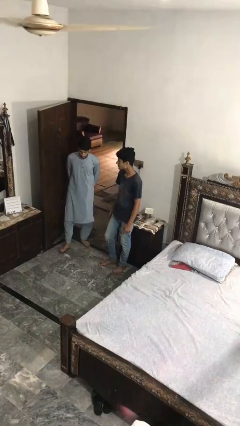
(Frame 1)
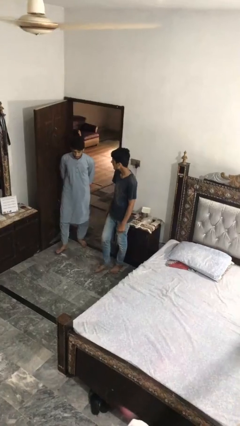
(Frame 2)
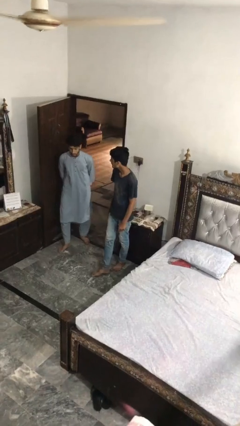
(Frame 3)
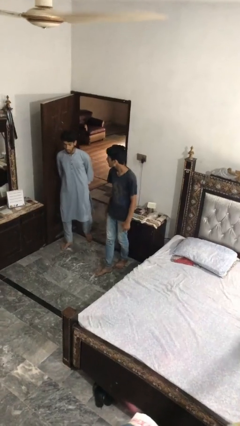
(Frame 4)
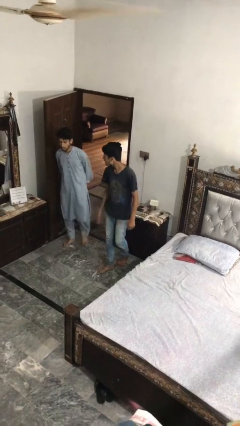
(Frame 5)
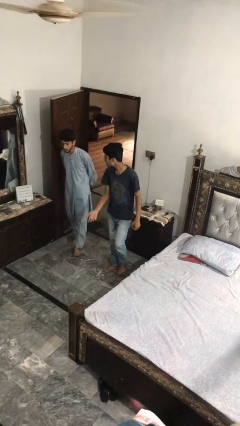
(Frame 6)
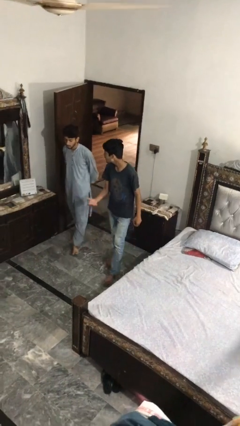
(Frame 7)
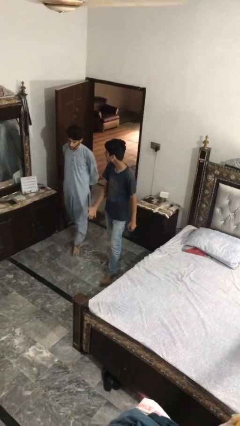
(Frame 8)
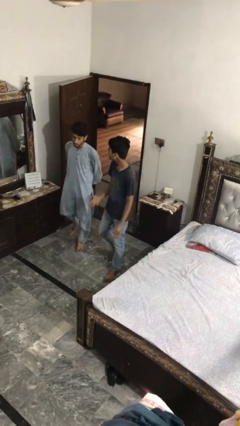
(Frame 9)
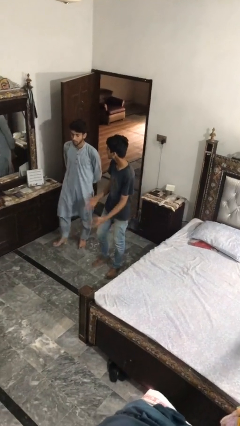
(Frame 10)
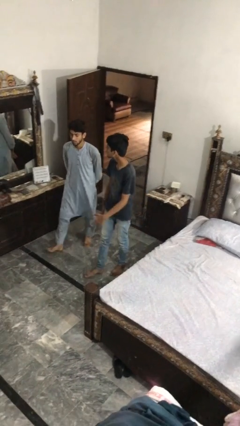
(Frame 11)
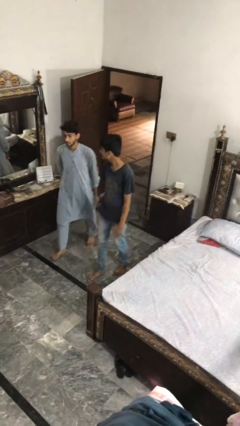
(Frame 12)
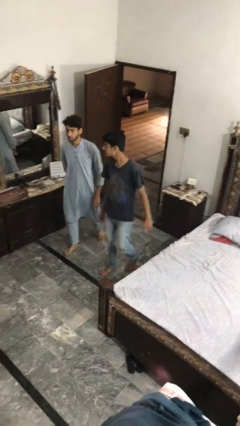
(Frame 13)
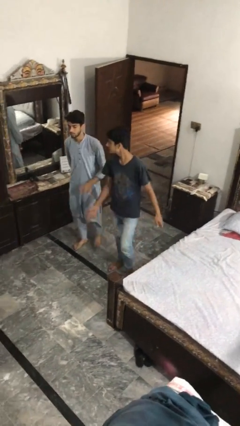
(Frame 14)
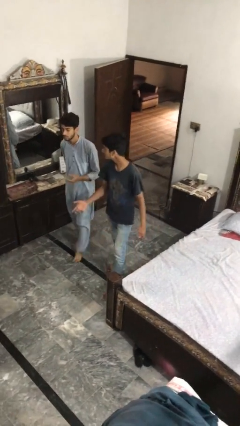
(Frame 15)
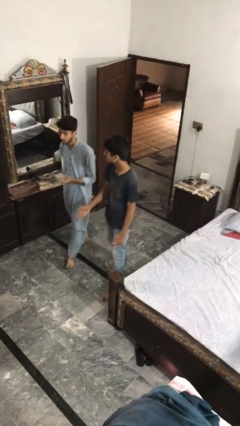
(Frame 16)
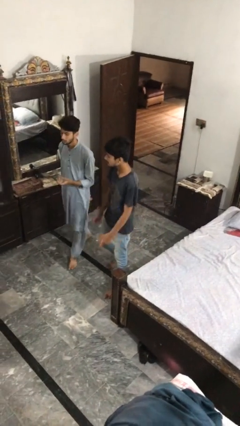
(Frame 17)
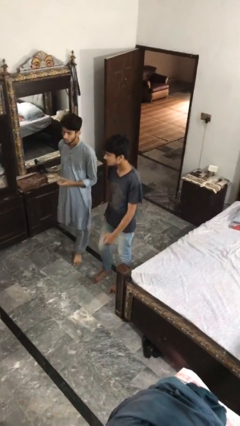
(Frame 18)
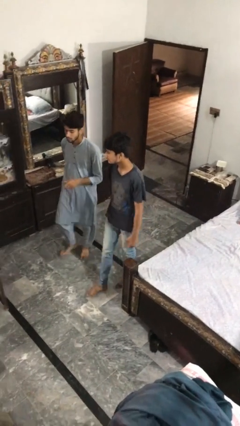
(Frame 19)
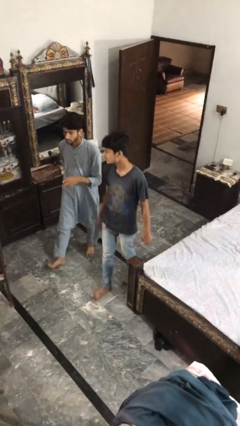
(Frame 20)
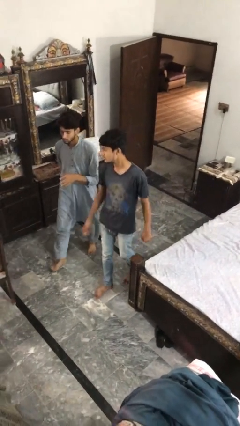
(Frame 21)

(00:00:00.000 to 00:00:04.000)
person talks to person

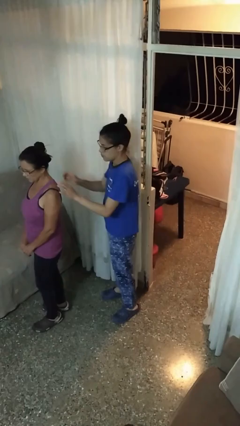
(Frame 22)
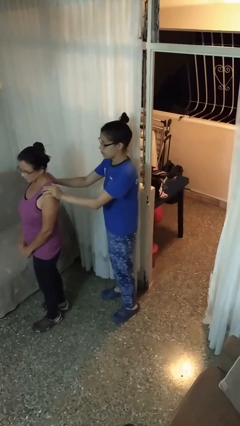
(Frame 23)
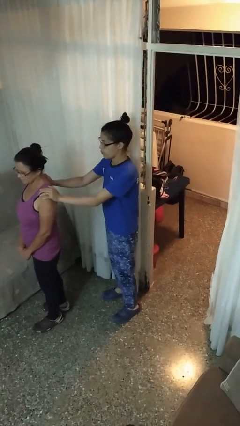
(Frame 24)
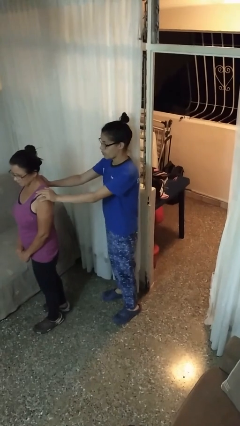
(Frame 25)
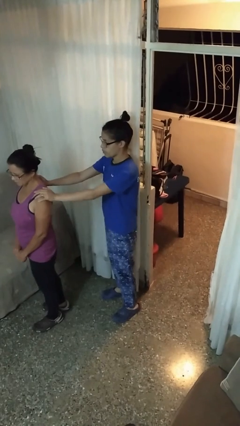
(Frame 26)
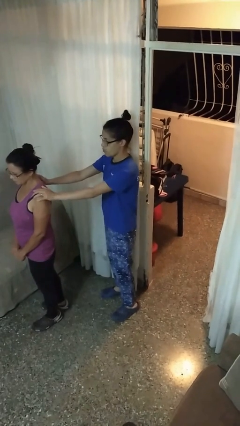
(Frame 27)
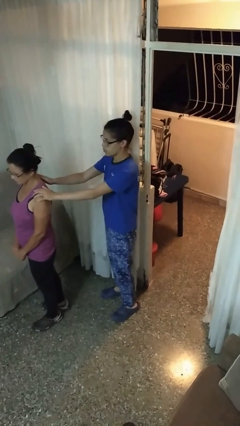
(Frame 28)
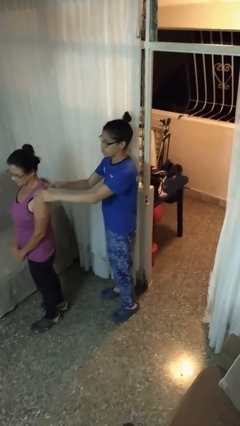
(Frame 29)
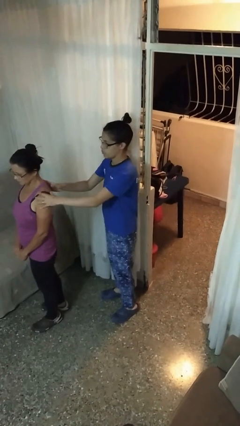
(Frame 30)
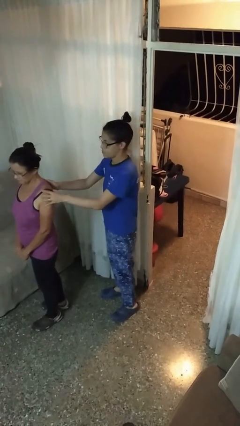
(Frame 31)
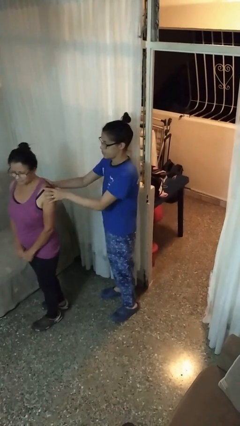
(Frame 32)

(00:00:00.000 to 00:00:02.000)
person grabs person by shoulder

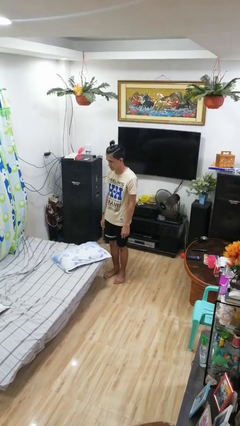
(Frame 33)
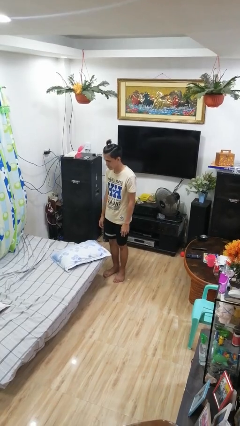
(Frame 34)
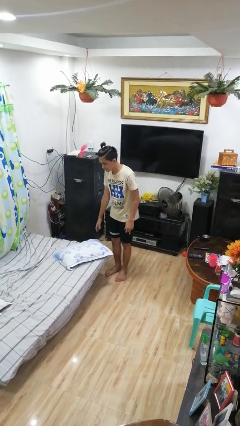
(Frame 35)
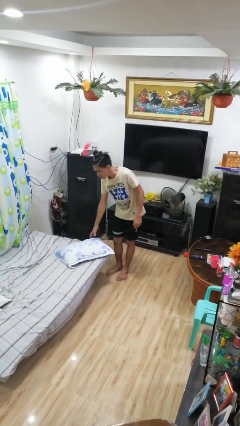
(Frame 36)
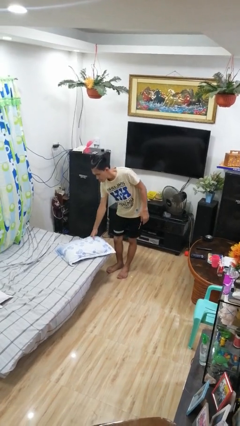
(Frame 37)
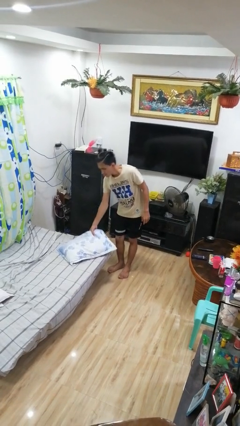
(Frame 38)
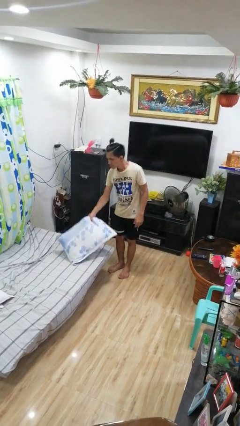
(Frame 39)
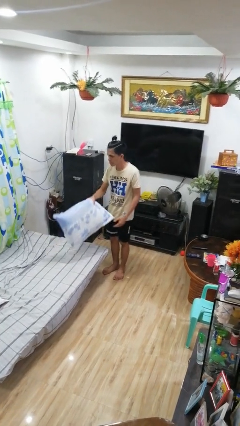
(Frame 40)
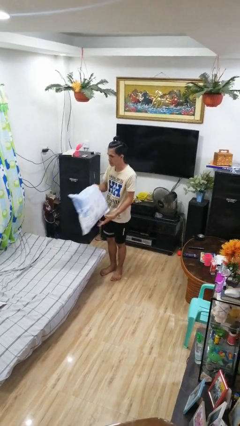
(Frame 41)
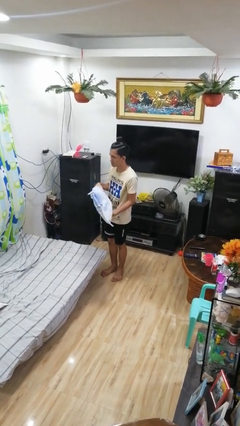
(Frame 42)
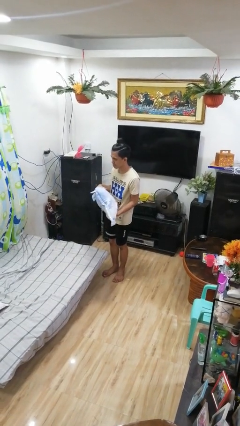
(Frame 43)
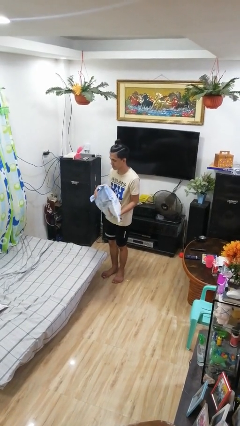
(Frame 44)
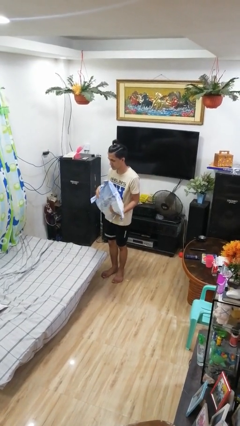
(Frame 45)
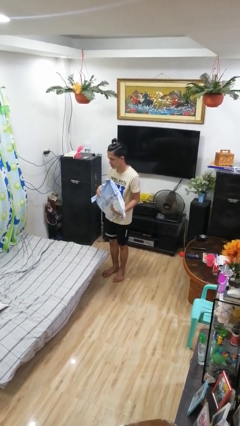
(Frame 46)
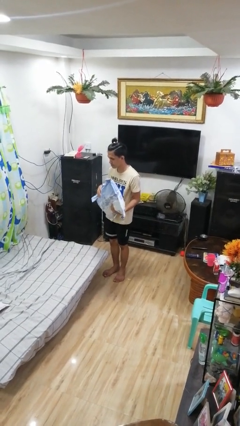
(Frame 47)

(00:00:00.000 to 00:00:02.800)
person picks up object from bed

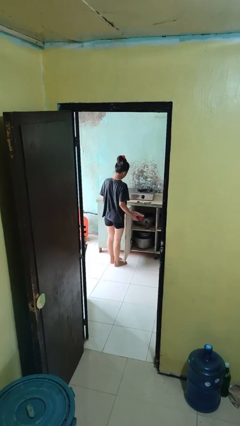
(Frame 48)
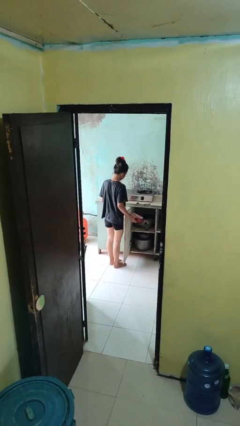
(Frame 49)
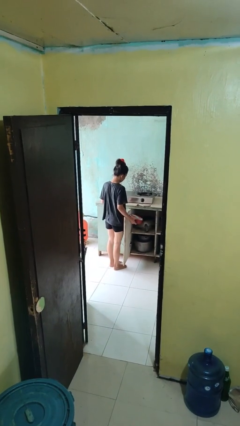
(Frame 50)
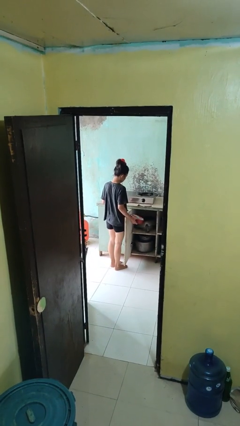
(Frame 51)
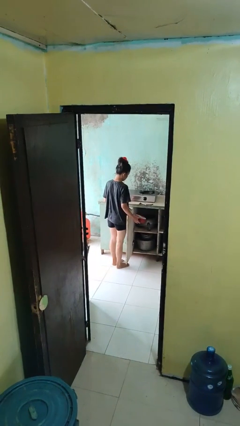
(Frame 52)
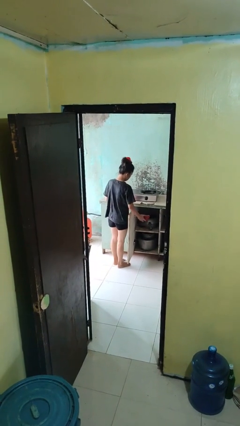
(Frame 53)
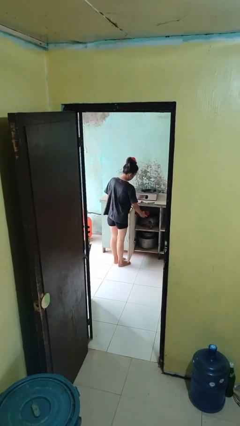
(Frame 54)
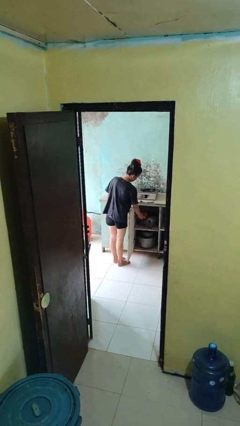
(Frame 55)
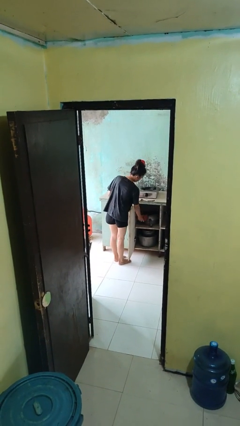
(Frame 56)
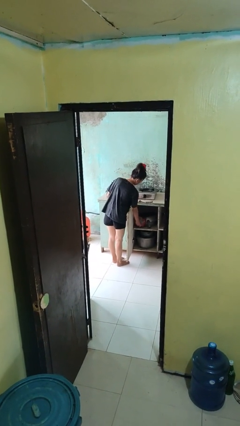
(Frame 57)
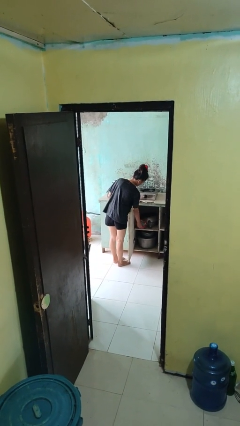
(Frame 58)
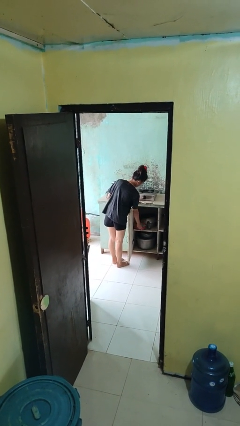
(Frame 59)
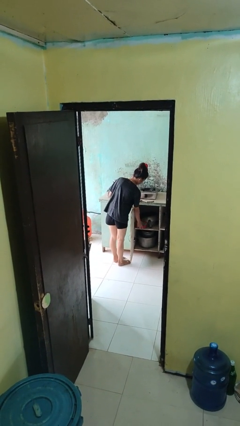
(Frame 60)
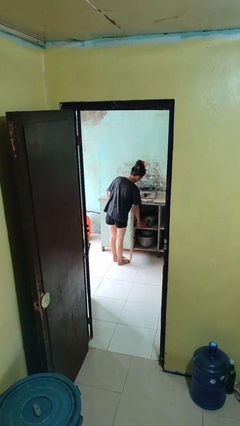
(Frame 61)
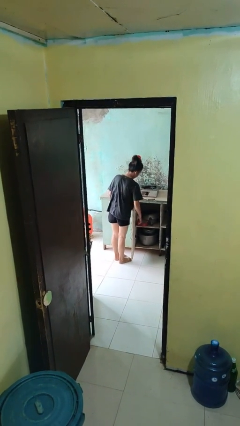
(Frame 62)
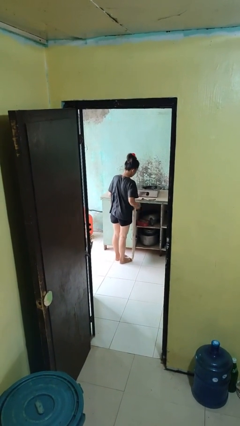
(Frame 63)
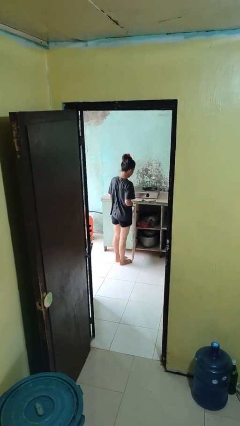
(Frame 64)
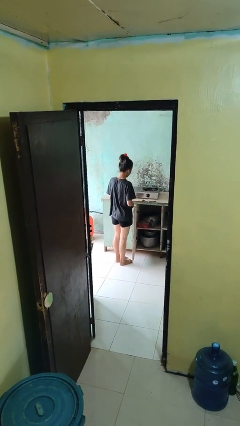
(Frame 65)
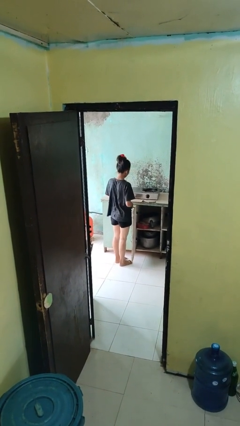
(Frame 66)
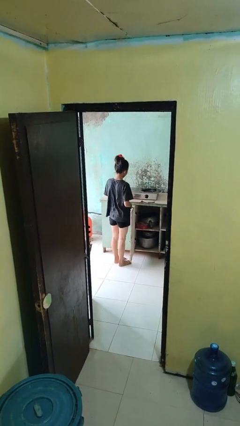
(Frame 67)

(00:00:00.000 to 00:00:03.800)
person puts object in cabinet

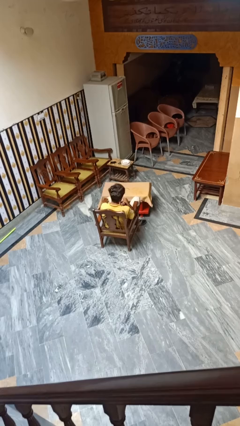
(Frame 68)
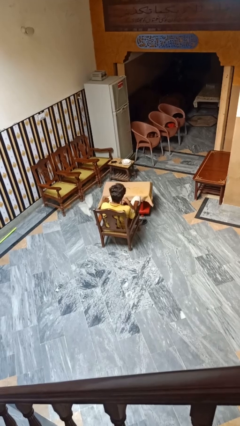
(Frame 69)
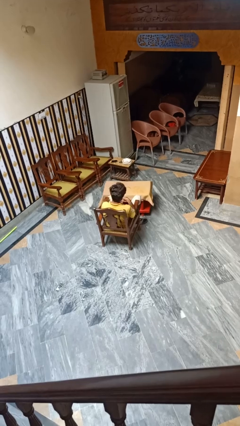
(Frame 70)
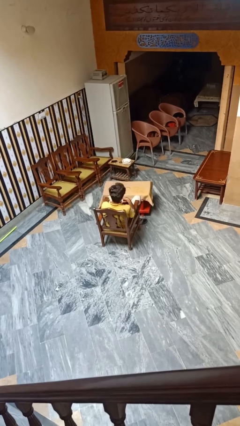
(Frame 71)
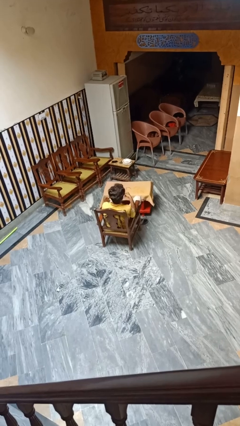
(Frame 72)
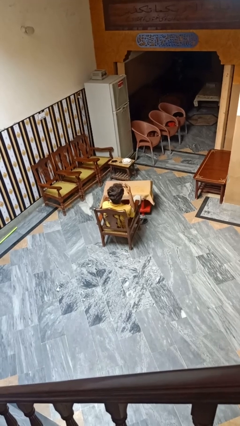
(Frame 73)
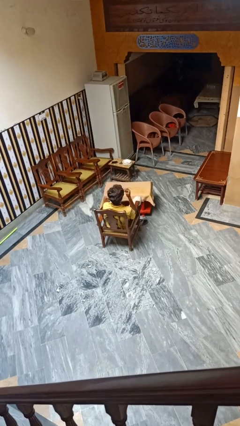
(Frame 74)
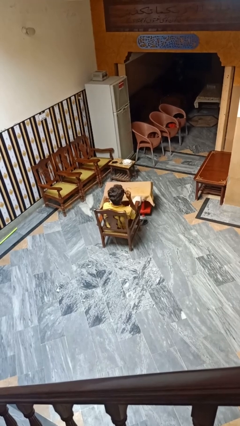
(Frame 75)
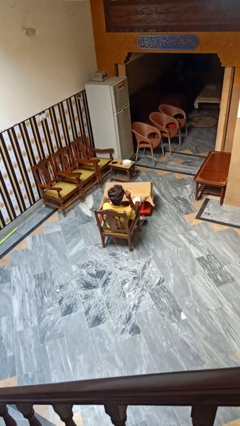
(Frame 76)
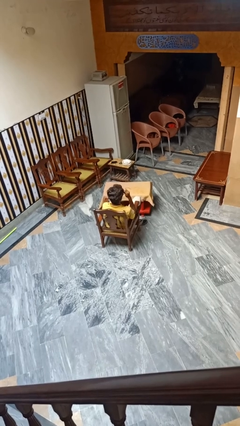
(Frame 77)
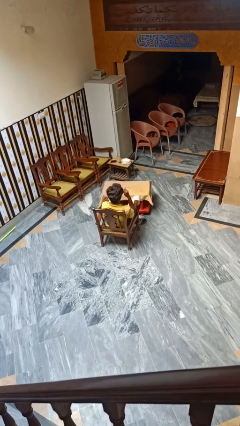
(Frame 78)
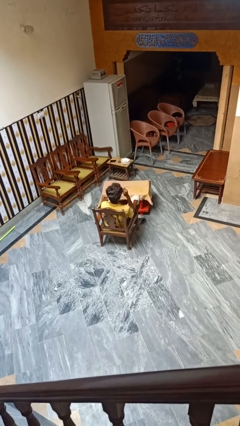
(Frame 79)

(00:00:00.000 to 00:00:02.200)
person clips fingernails

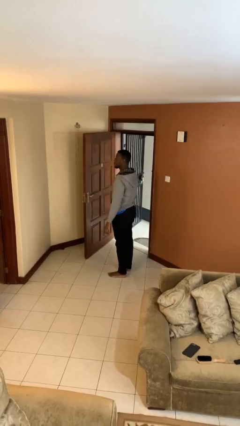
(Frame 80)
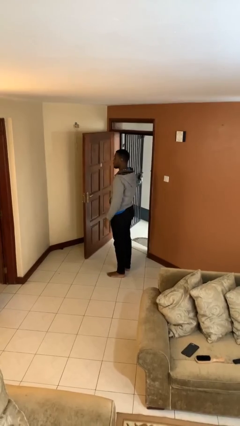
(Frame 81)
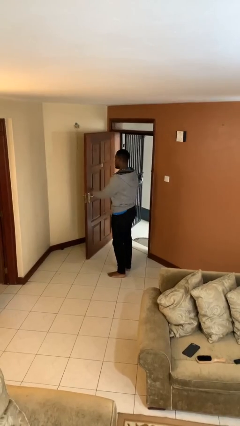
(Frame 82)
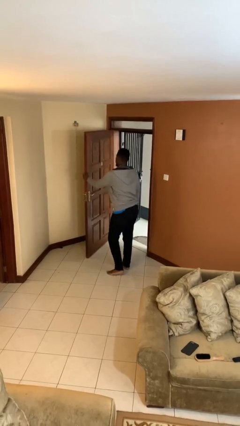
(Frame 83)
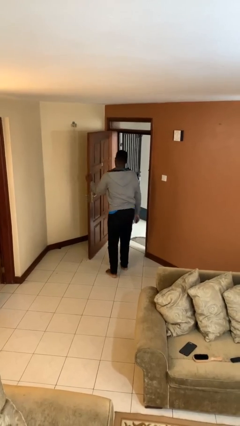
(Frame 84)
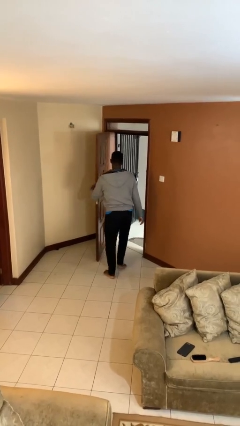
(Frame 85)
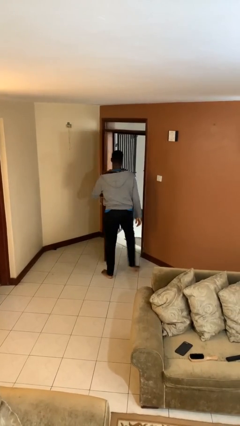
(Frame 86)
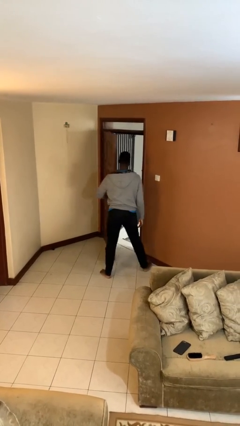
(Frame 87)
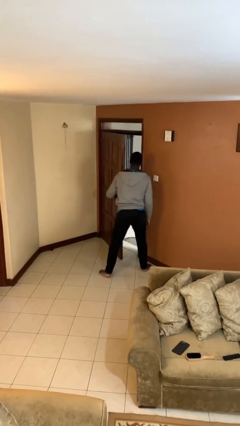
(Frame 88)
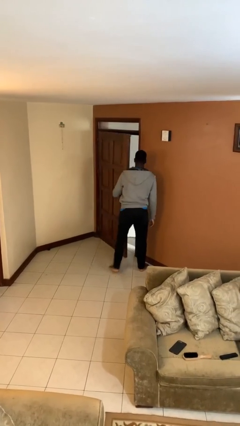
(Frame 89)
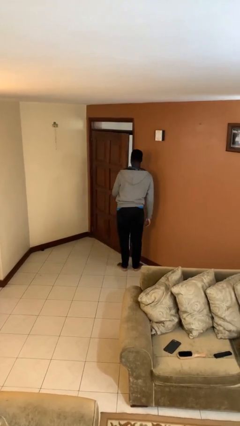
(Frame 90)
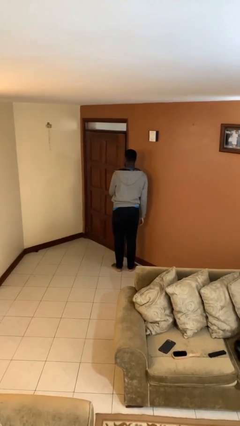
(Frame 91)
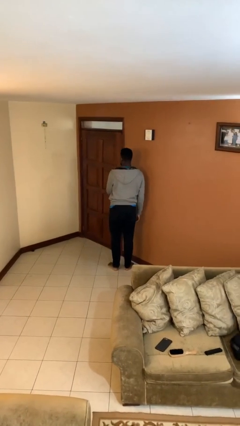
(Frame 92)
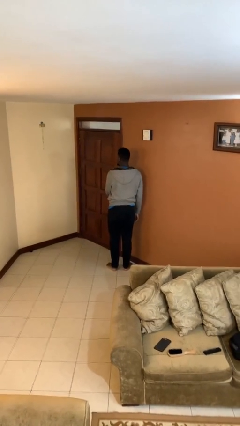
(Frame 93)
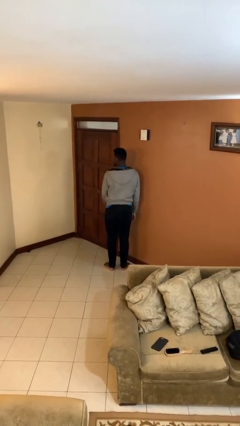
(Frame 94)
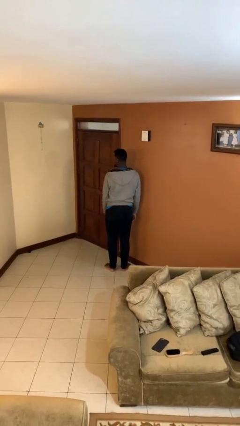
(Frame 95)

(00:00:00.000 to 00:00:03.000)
person opens facility door
